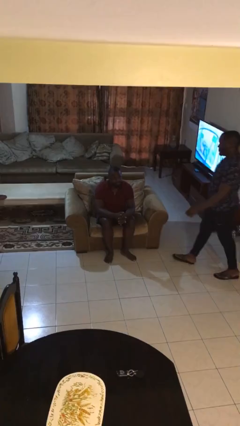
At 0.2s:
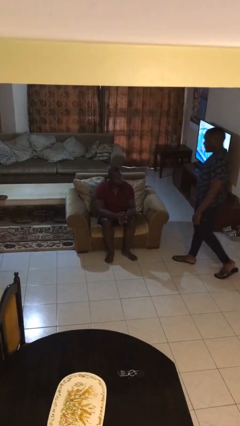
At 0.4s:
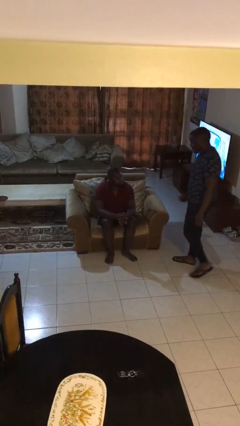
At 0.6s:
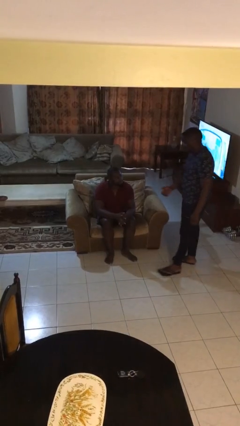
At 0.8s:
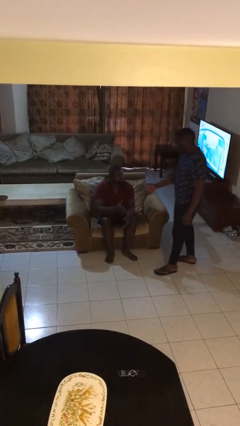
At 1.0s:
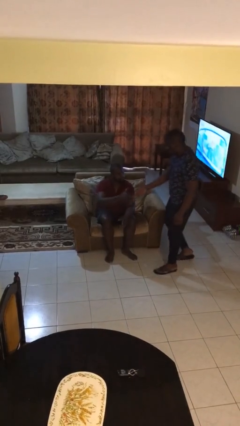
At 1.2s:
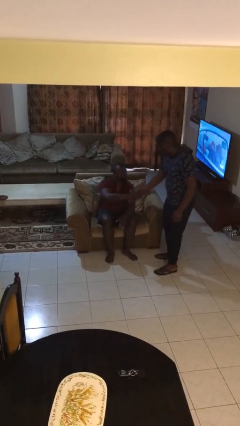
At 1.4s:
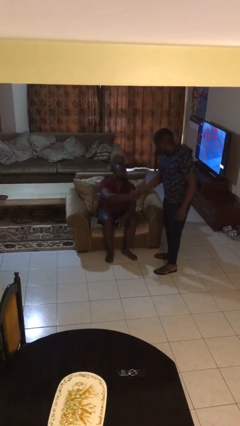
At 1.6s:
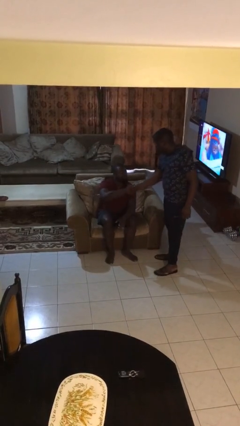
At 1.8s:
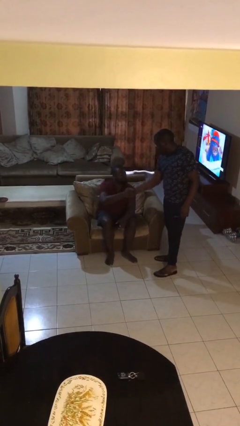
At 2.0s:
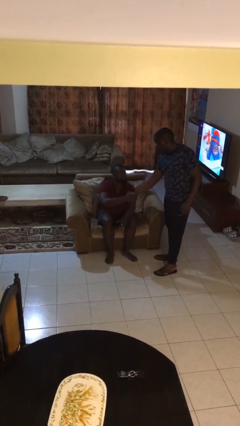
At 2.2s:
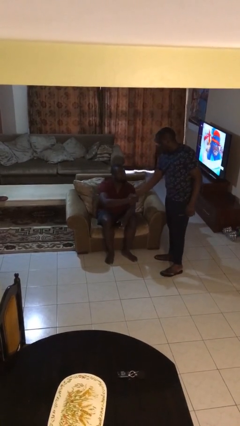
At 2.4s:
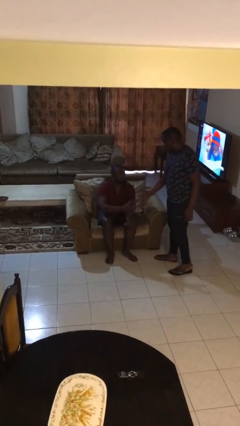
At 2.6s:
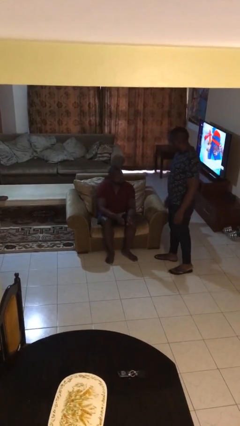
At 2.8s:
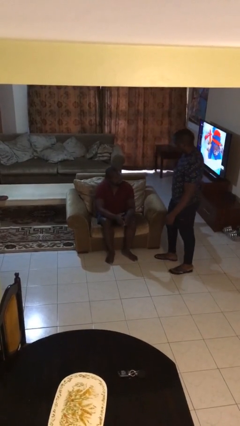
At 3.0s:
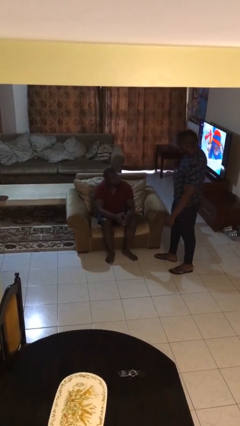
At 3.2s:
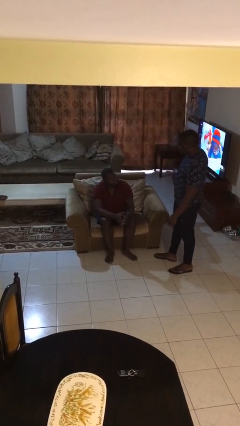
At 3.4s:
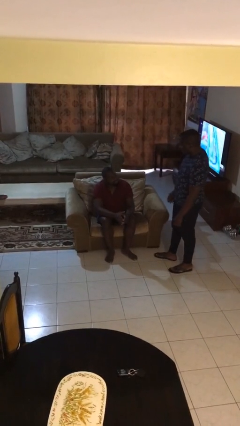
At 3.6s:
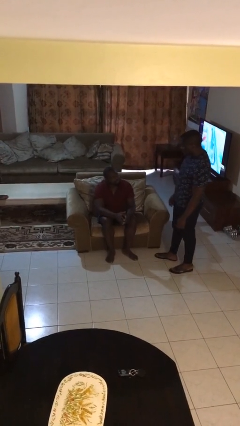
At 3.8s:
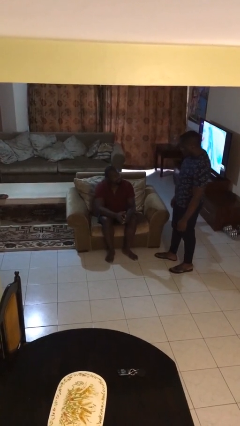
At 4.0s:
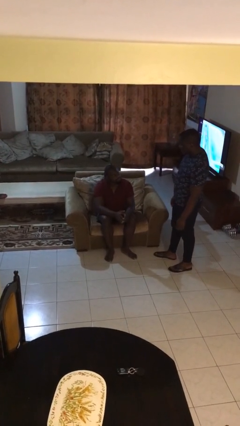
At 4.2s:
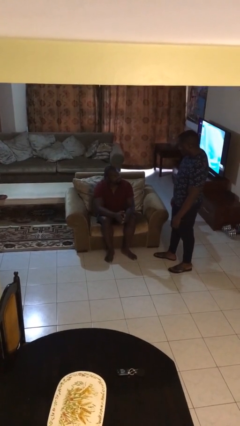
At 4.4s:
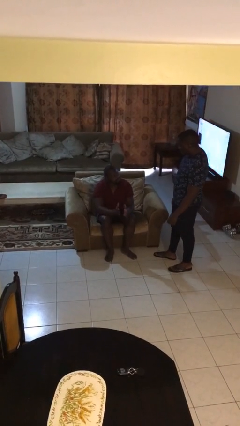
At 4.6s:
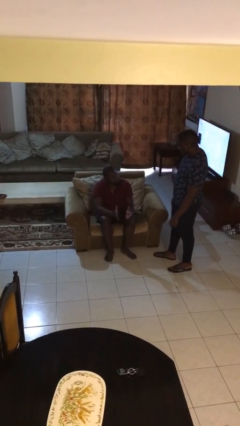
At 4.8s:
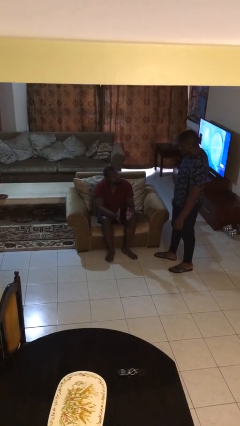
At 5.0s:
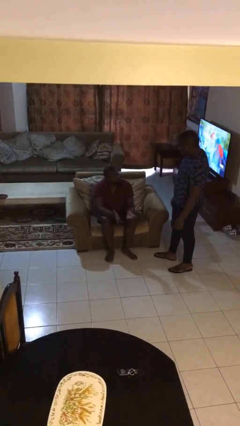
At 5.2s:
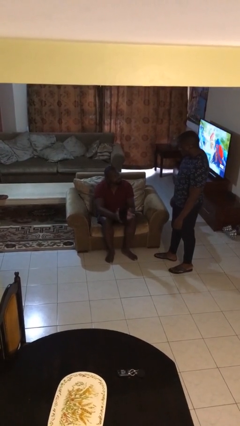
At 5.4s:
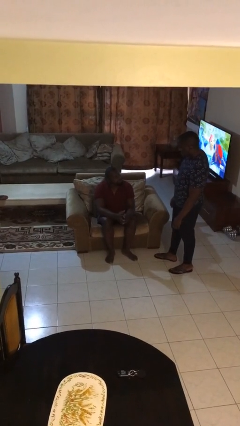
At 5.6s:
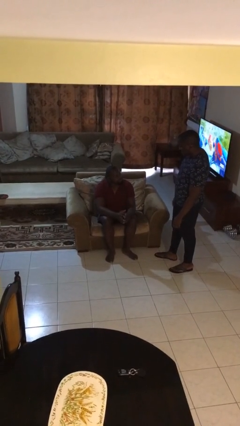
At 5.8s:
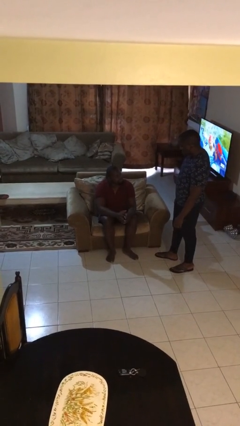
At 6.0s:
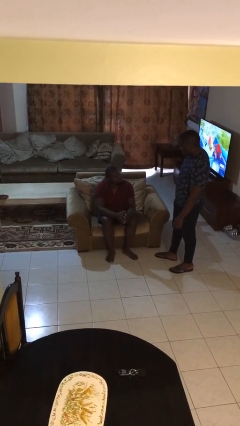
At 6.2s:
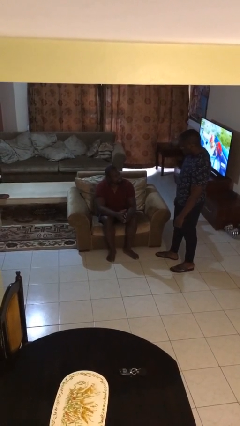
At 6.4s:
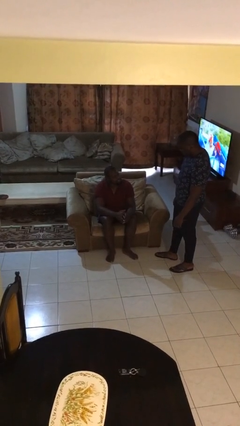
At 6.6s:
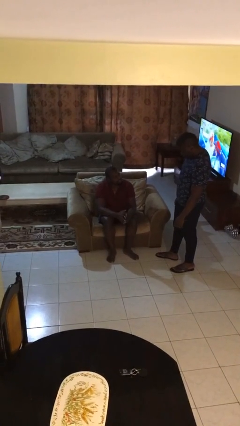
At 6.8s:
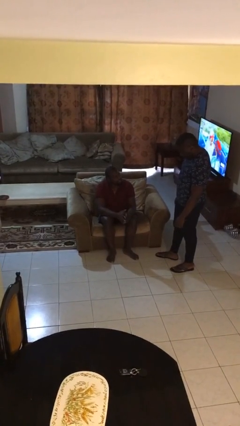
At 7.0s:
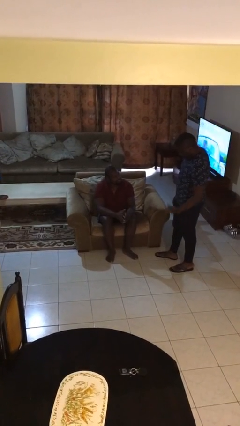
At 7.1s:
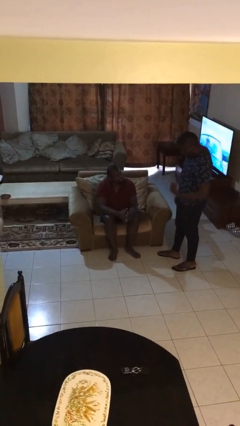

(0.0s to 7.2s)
person shakes hand

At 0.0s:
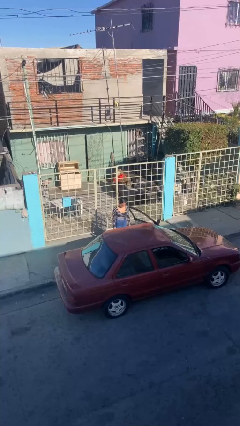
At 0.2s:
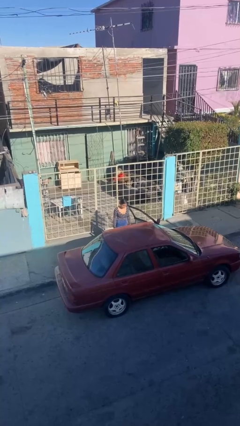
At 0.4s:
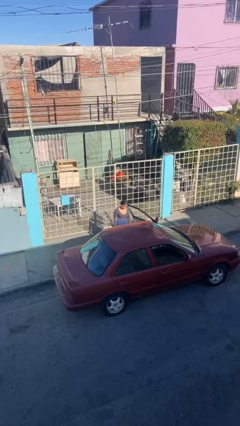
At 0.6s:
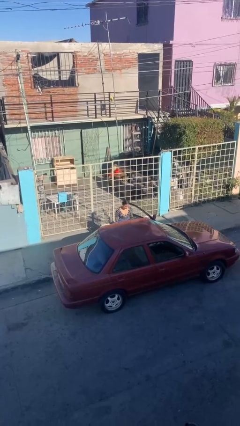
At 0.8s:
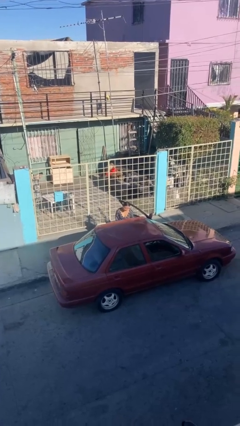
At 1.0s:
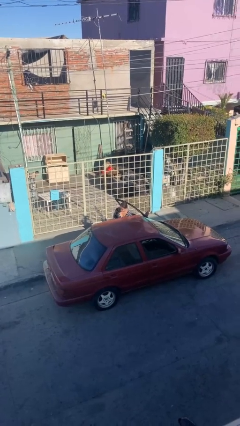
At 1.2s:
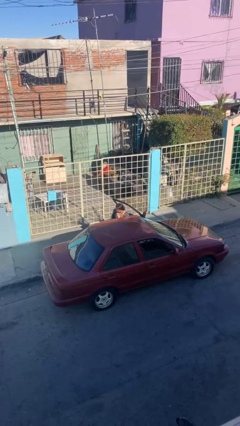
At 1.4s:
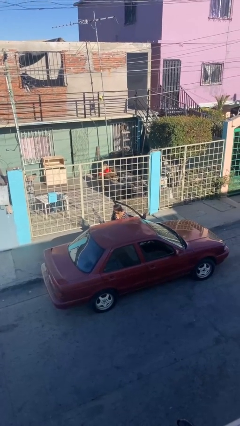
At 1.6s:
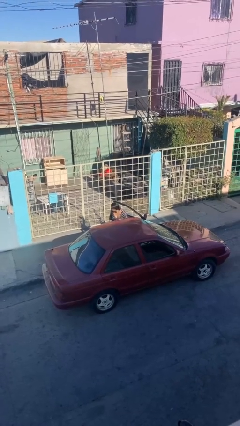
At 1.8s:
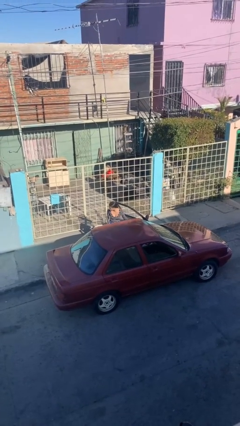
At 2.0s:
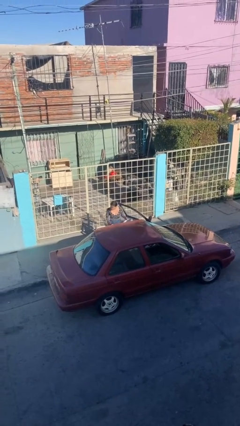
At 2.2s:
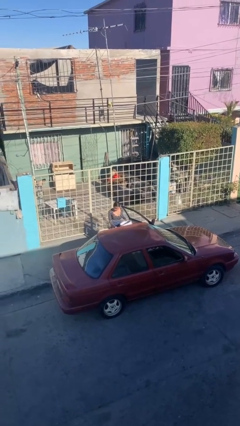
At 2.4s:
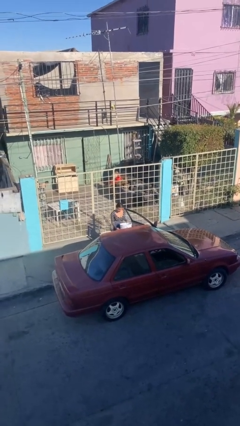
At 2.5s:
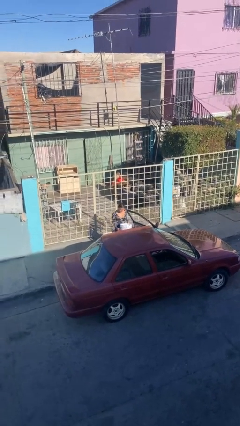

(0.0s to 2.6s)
person unloads car

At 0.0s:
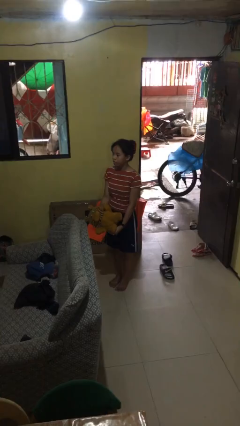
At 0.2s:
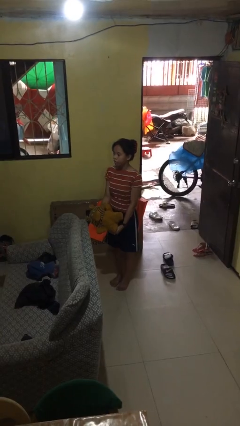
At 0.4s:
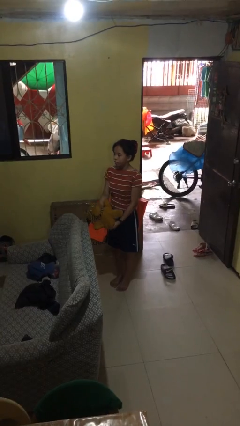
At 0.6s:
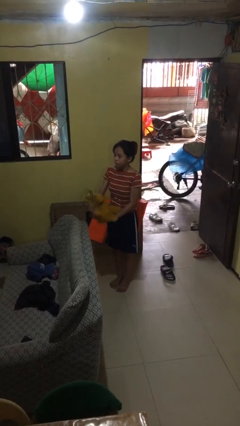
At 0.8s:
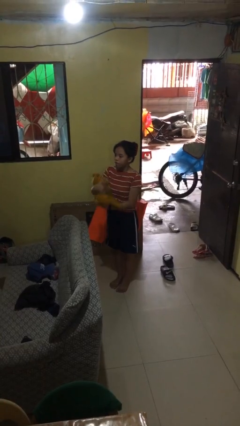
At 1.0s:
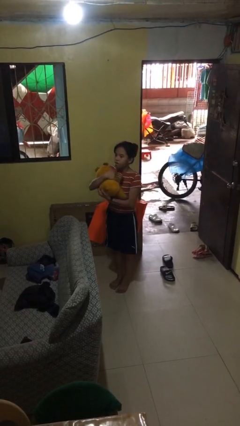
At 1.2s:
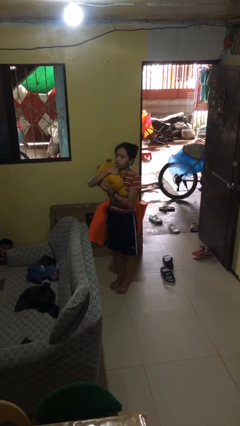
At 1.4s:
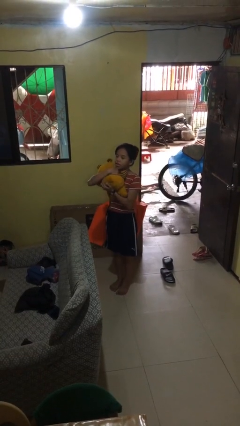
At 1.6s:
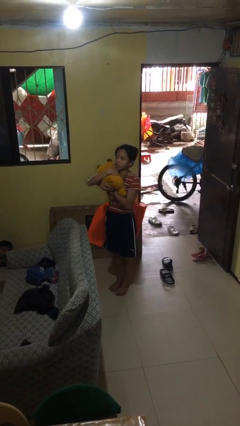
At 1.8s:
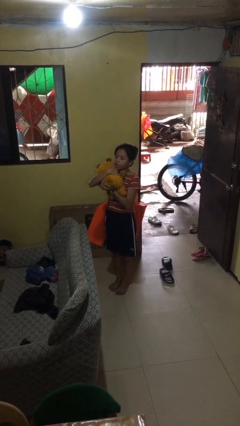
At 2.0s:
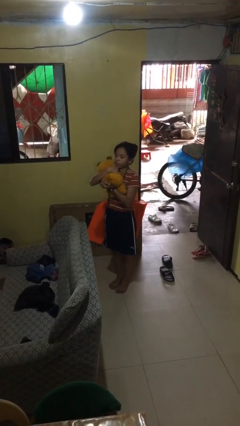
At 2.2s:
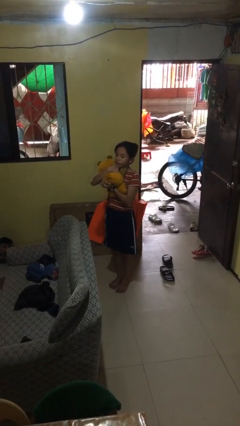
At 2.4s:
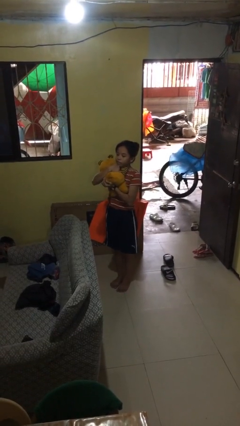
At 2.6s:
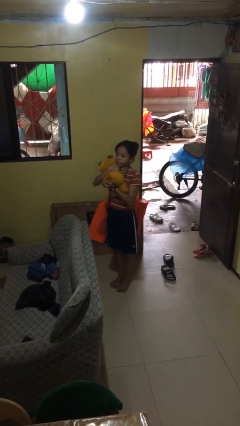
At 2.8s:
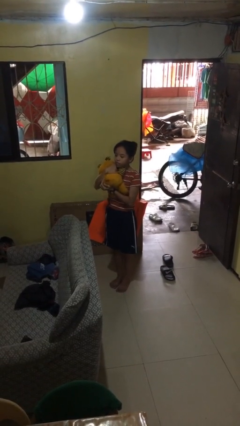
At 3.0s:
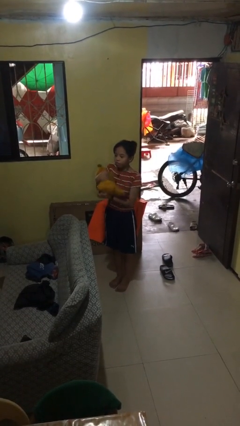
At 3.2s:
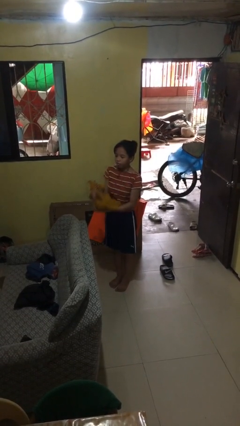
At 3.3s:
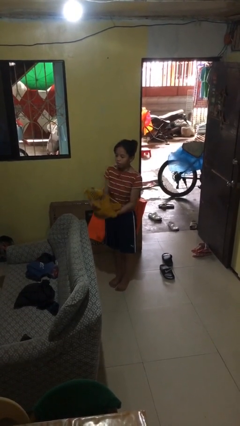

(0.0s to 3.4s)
person hugs stuffed animal

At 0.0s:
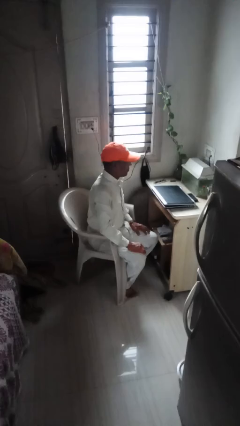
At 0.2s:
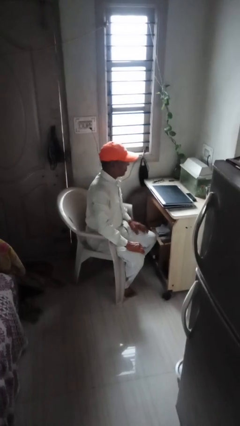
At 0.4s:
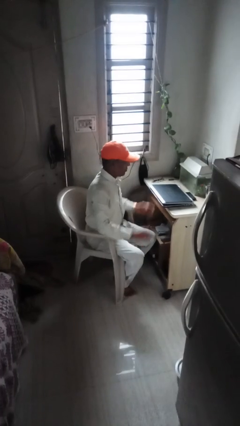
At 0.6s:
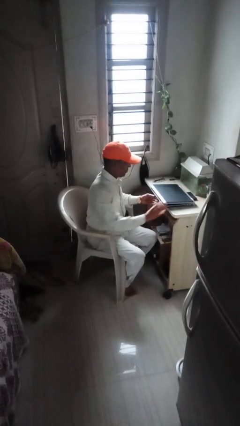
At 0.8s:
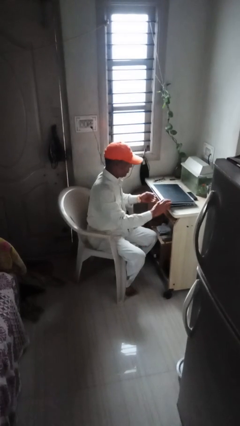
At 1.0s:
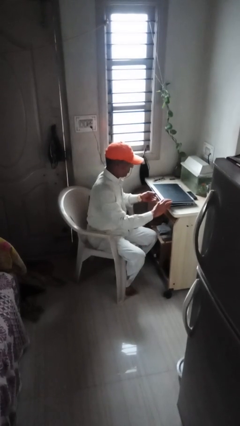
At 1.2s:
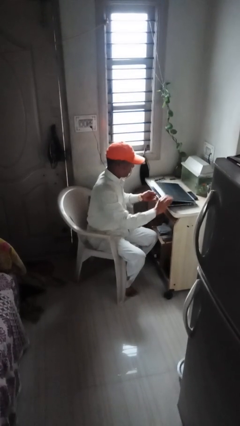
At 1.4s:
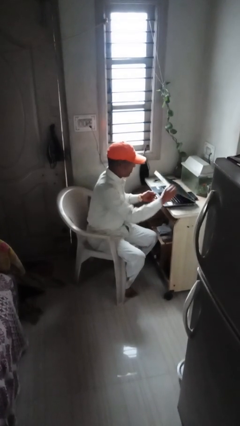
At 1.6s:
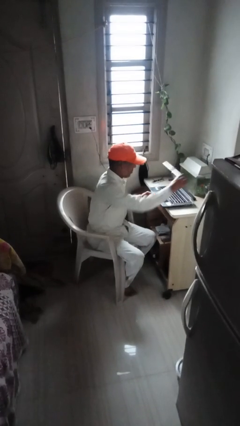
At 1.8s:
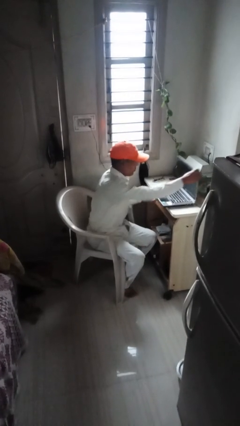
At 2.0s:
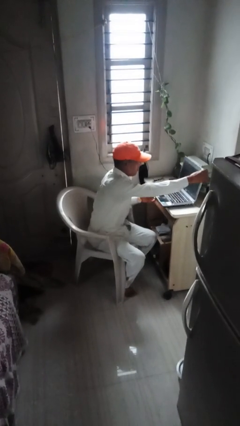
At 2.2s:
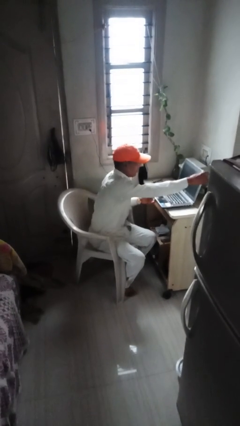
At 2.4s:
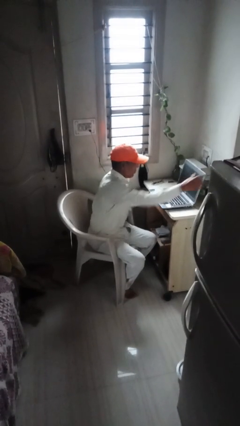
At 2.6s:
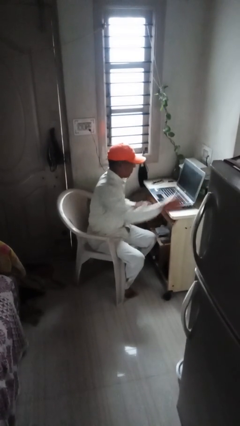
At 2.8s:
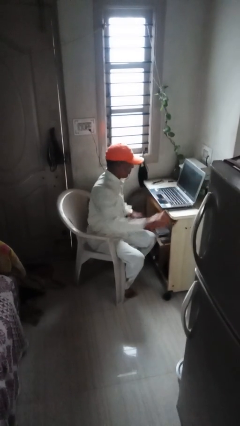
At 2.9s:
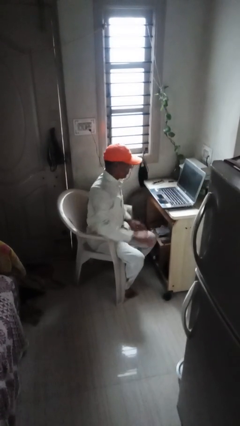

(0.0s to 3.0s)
person opens laptop

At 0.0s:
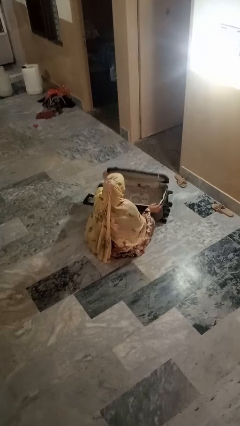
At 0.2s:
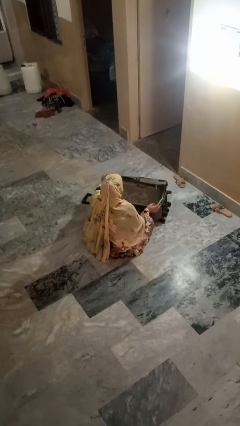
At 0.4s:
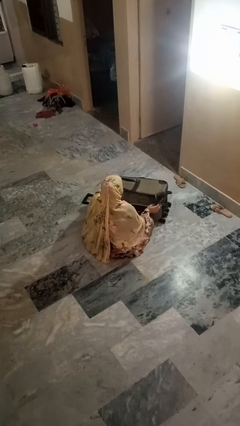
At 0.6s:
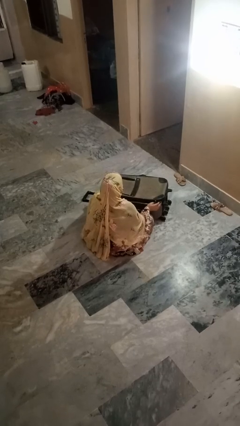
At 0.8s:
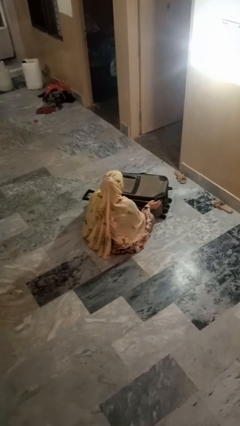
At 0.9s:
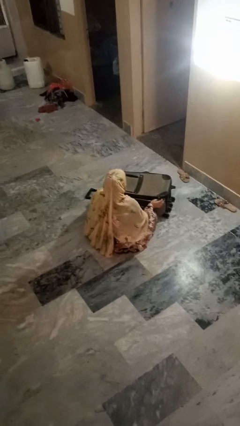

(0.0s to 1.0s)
person closes suitcase

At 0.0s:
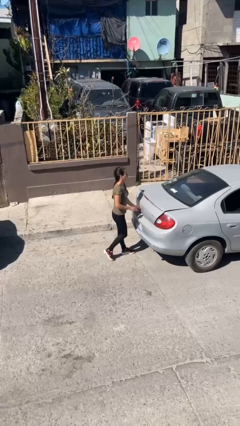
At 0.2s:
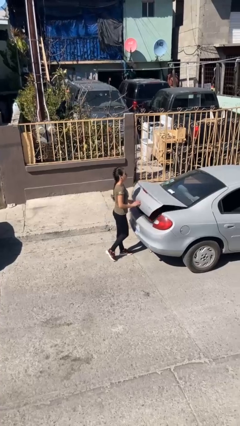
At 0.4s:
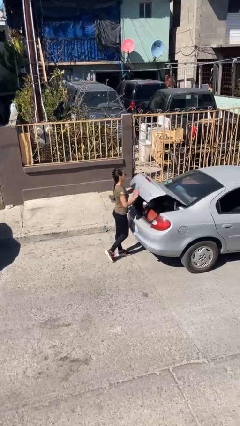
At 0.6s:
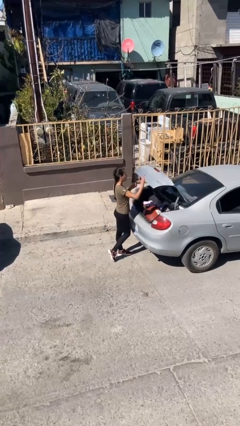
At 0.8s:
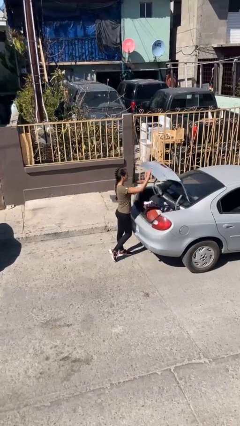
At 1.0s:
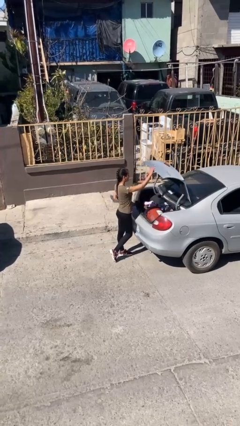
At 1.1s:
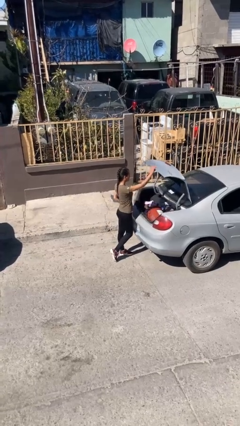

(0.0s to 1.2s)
person opens car trunk
